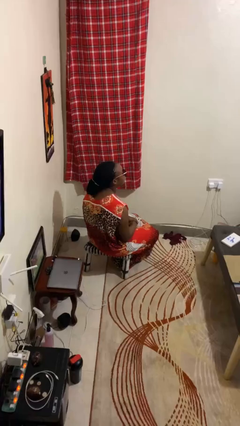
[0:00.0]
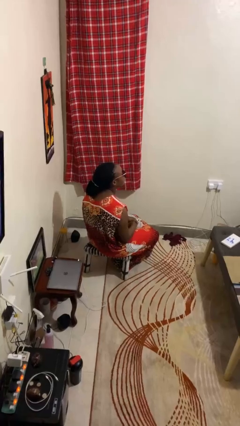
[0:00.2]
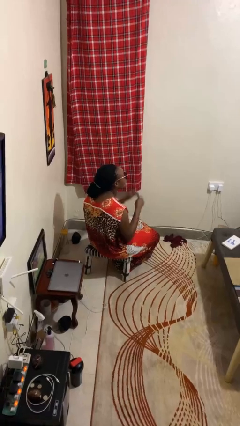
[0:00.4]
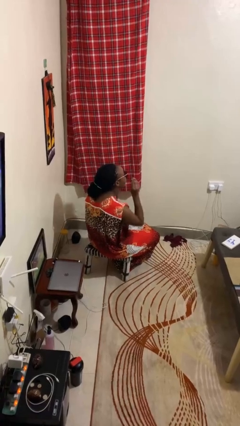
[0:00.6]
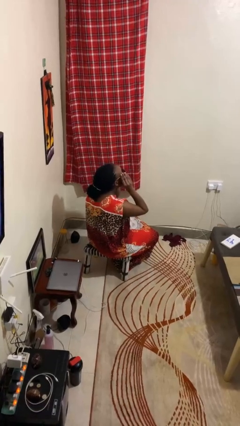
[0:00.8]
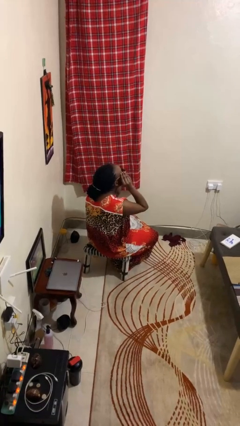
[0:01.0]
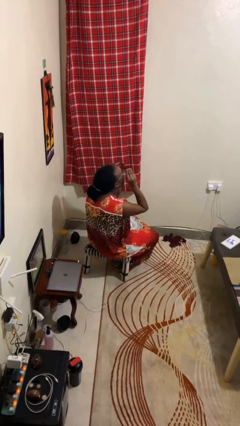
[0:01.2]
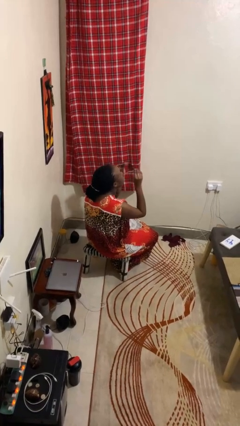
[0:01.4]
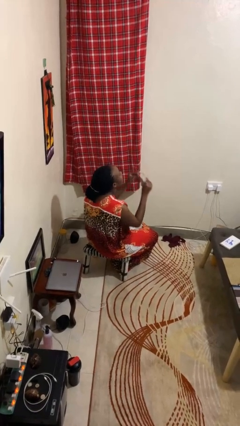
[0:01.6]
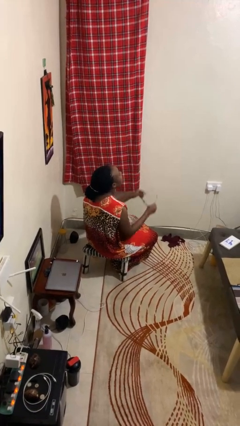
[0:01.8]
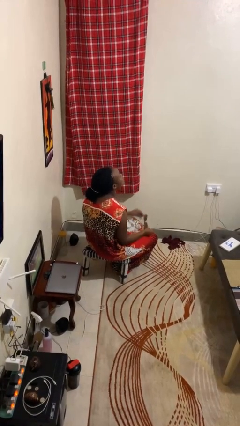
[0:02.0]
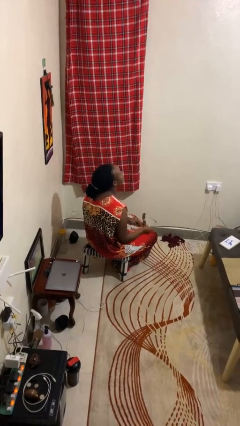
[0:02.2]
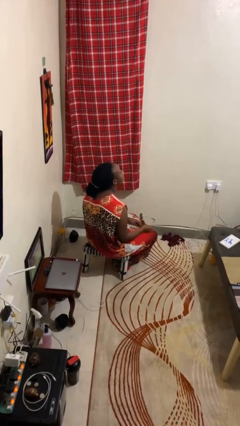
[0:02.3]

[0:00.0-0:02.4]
person takes off sunglasses

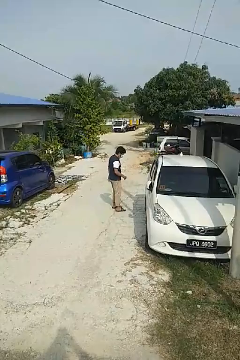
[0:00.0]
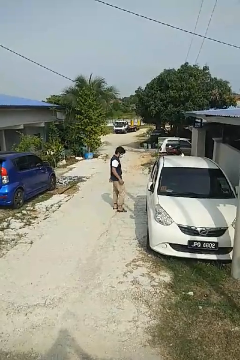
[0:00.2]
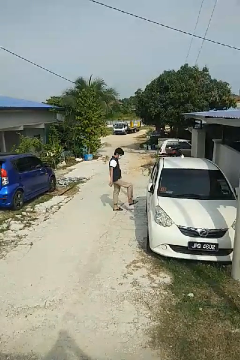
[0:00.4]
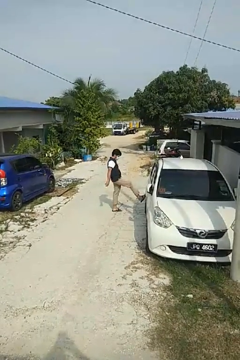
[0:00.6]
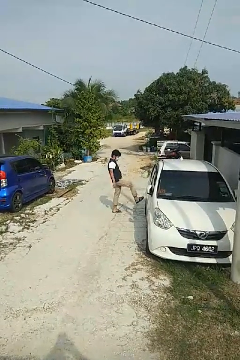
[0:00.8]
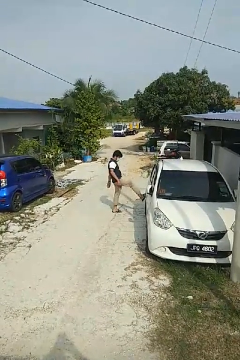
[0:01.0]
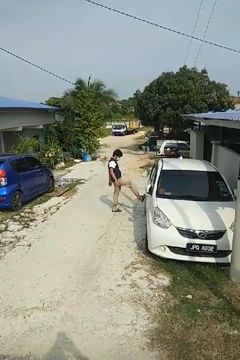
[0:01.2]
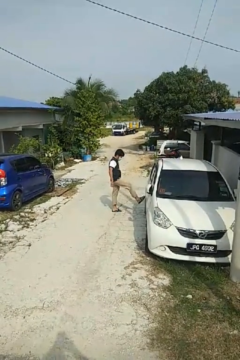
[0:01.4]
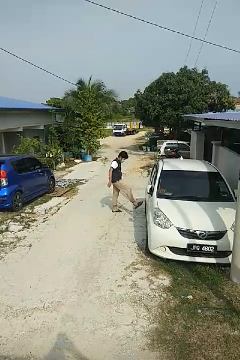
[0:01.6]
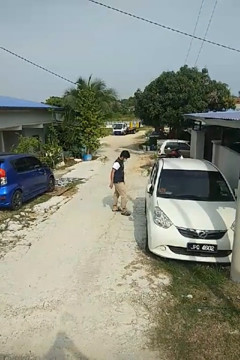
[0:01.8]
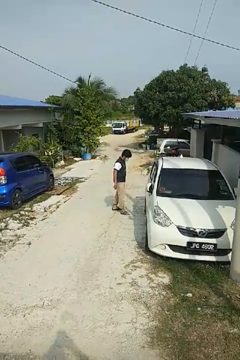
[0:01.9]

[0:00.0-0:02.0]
person kicks car tires

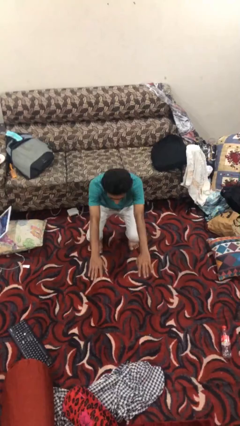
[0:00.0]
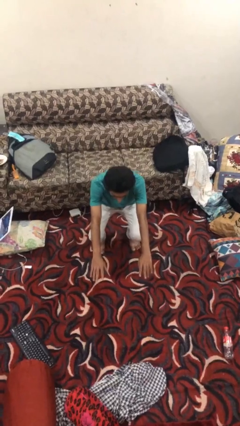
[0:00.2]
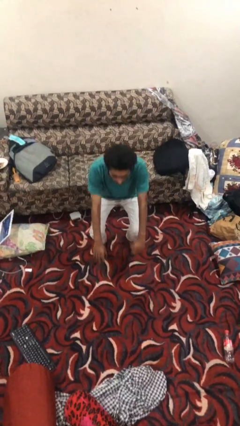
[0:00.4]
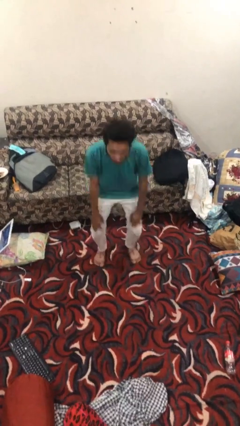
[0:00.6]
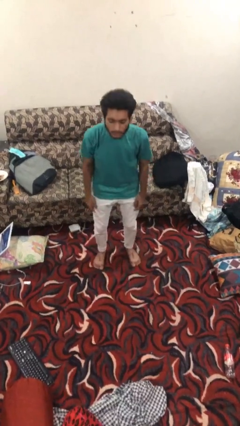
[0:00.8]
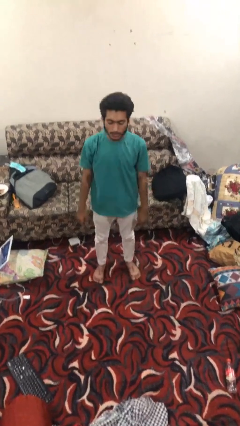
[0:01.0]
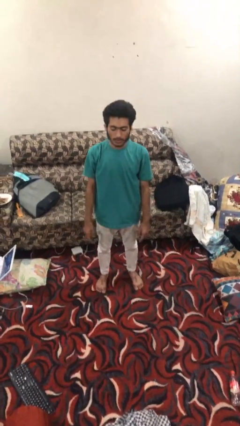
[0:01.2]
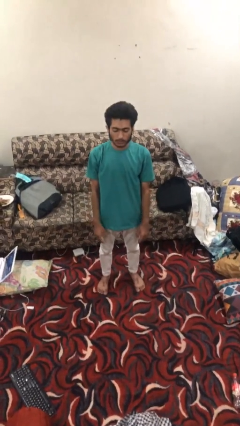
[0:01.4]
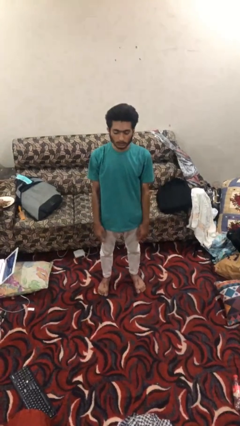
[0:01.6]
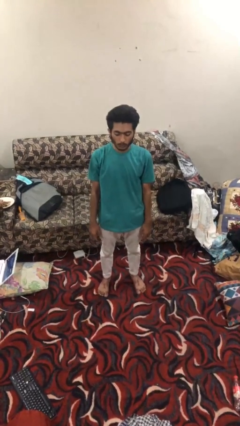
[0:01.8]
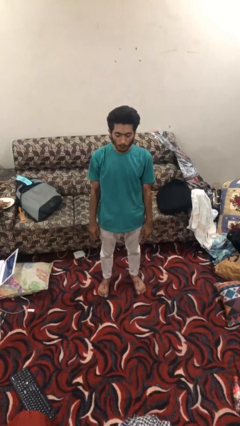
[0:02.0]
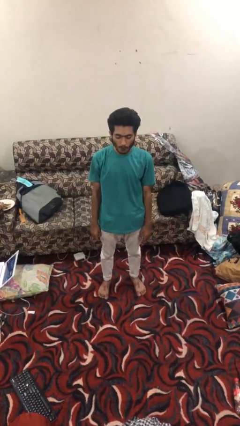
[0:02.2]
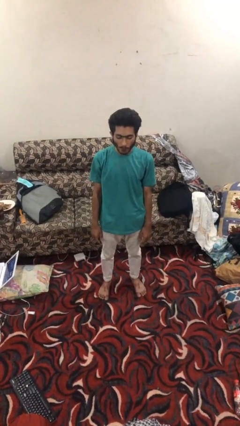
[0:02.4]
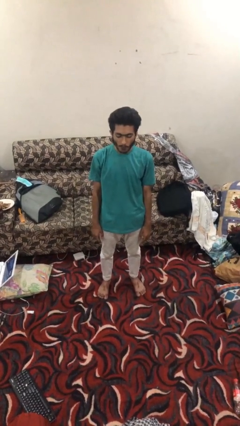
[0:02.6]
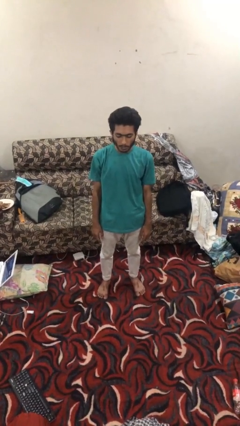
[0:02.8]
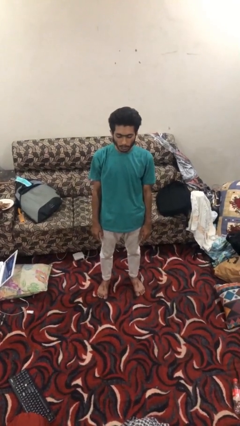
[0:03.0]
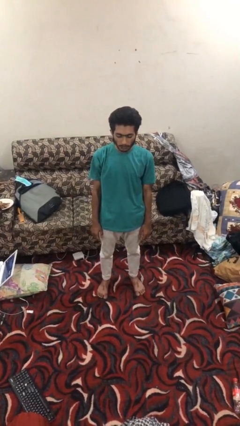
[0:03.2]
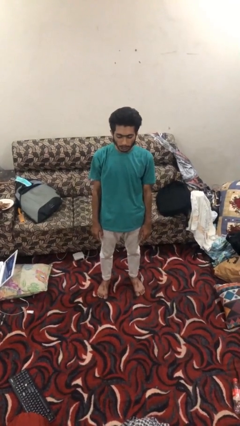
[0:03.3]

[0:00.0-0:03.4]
person stands up

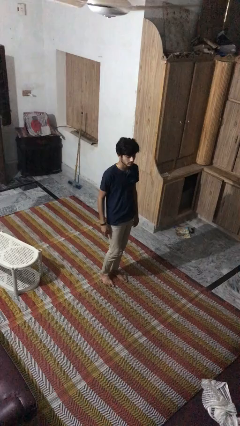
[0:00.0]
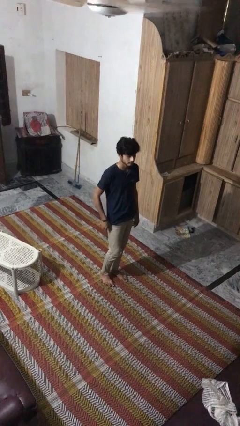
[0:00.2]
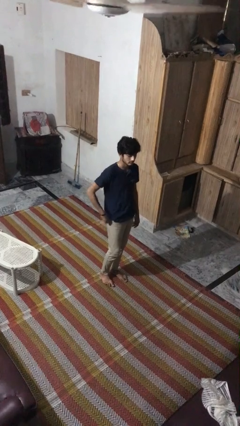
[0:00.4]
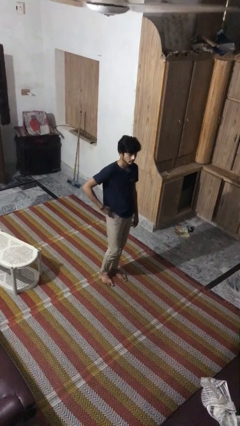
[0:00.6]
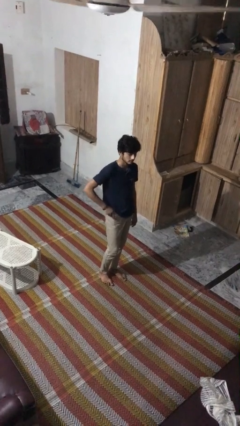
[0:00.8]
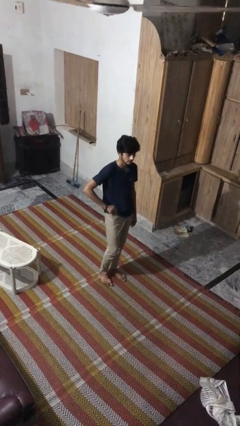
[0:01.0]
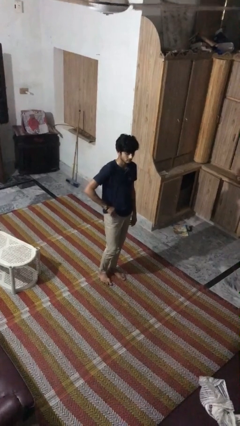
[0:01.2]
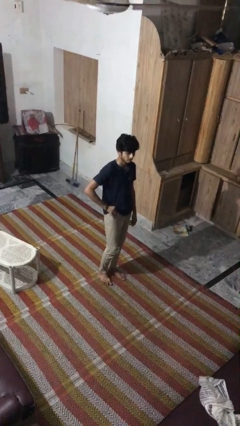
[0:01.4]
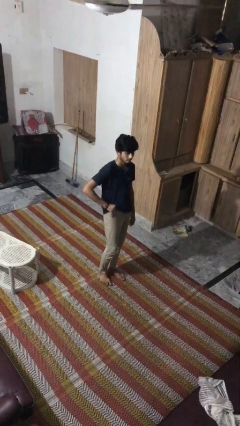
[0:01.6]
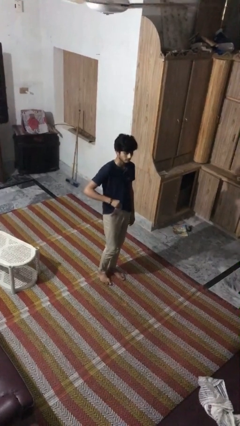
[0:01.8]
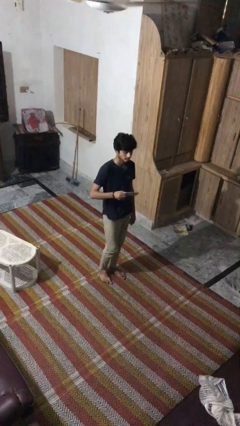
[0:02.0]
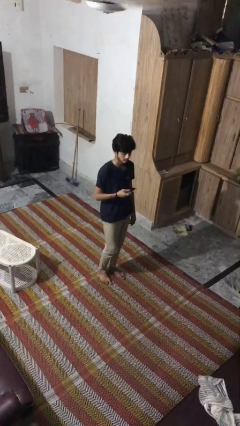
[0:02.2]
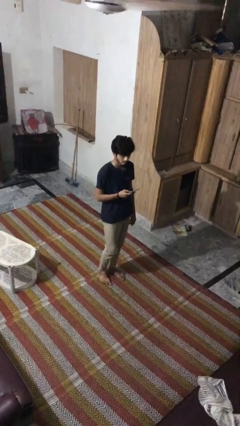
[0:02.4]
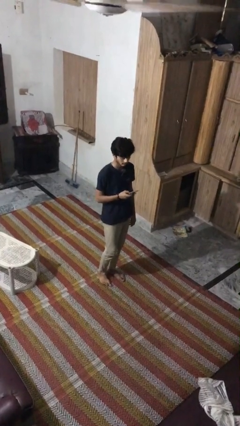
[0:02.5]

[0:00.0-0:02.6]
person takes phone from pocket

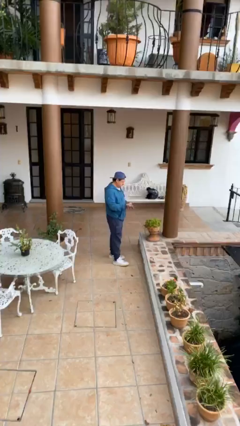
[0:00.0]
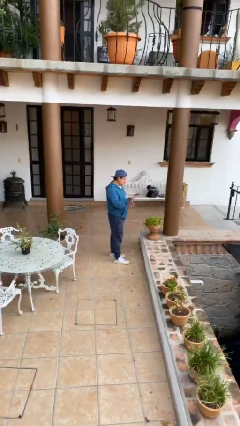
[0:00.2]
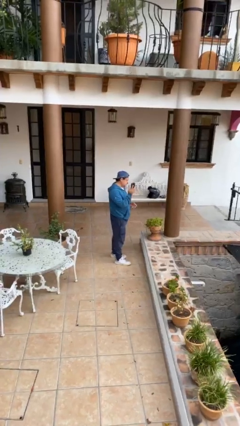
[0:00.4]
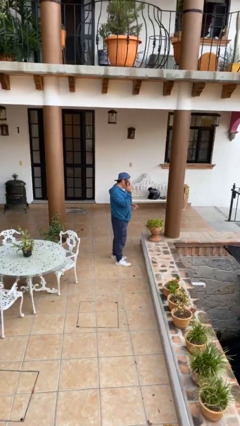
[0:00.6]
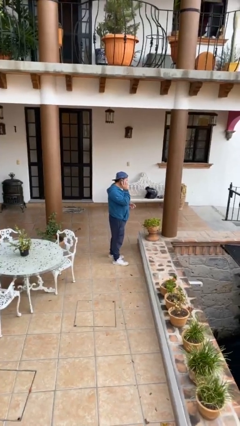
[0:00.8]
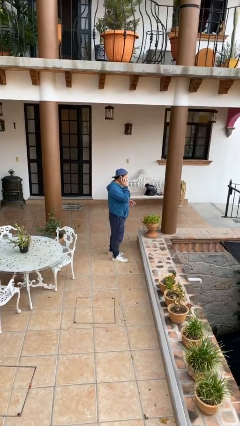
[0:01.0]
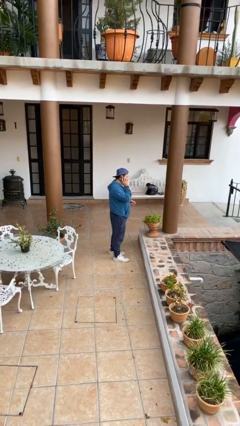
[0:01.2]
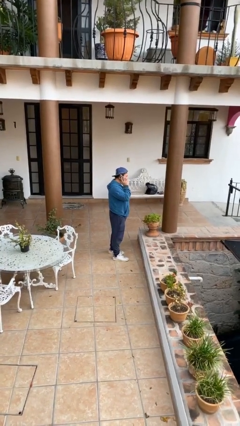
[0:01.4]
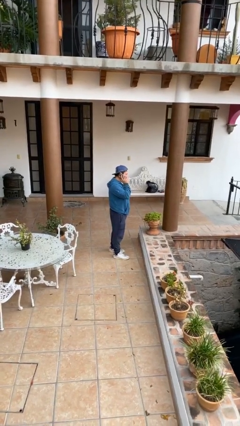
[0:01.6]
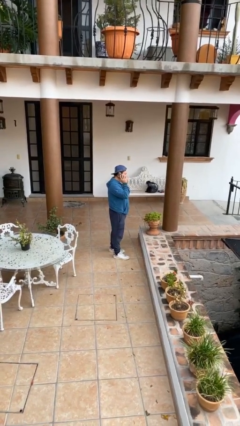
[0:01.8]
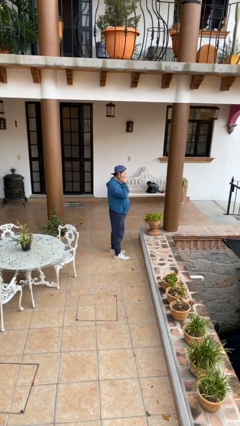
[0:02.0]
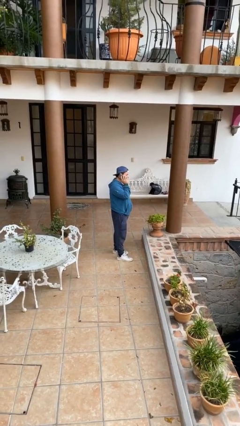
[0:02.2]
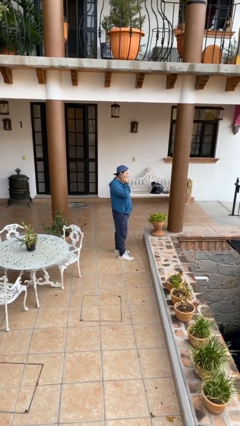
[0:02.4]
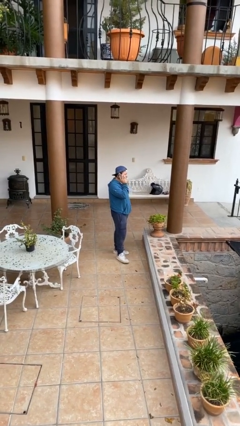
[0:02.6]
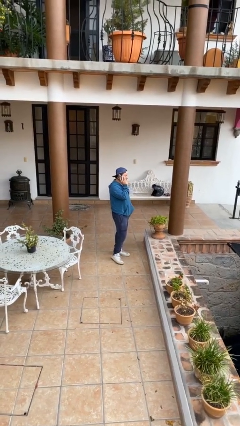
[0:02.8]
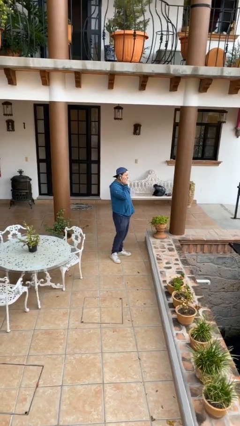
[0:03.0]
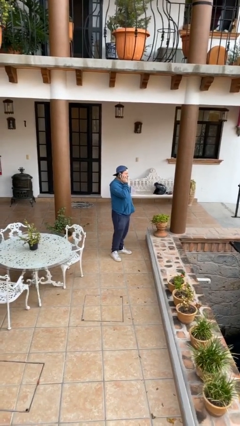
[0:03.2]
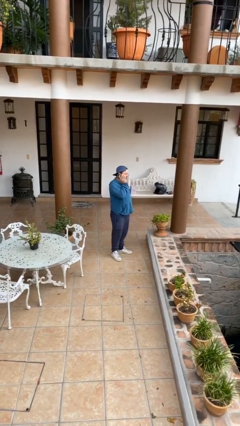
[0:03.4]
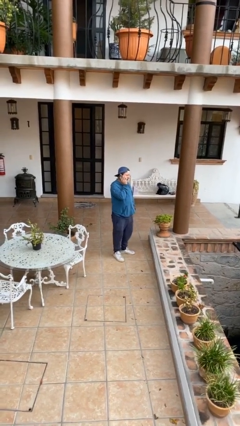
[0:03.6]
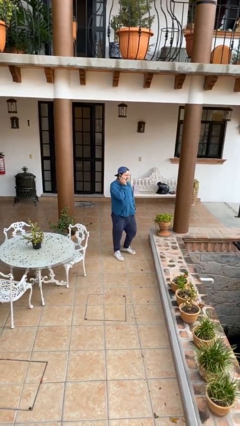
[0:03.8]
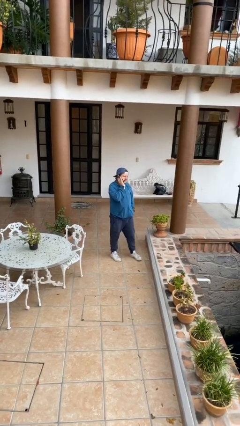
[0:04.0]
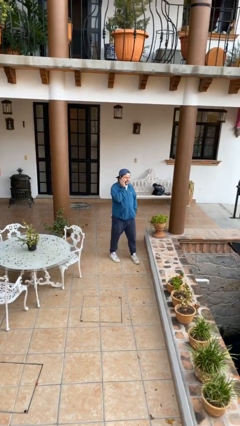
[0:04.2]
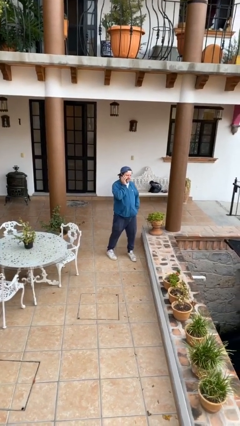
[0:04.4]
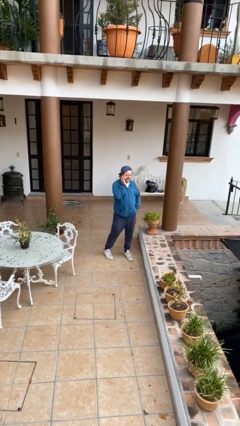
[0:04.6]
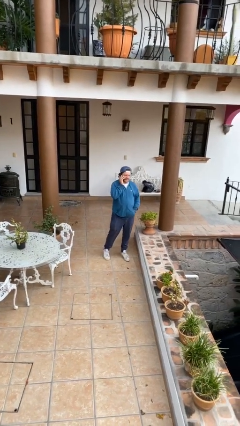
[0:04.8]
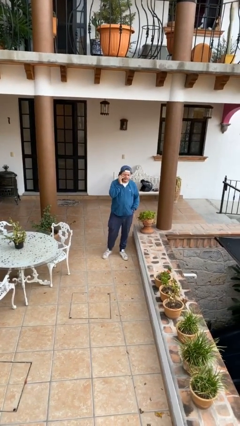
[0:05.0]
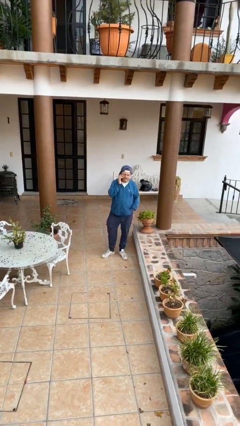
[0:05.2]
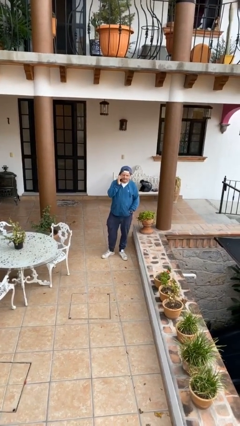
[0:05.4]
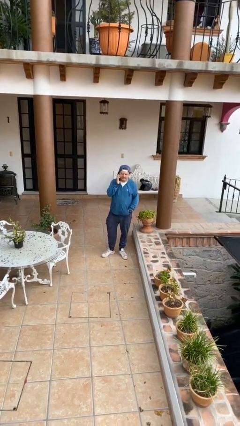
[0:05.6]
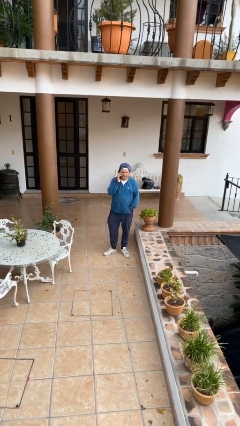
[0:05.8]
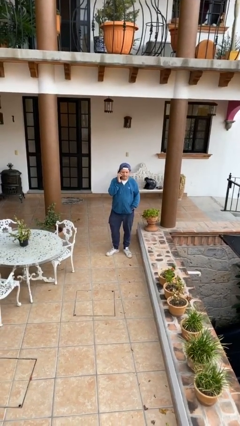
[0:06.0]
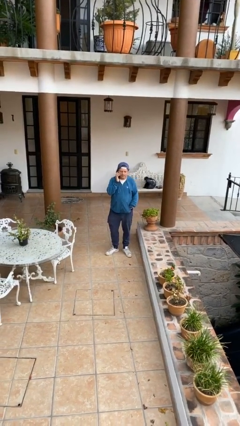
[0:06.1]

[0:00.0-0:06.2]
person talks on phone

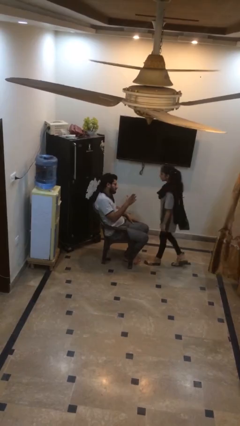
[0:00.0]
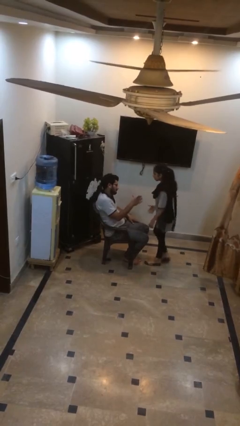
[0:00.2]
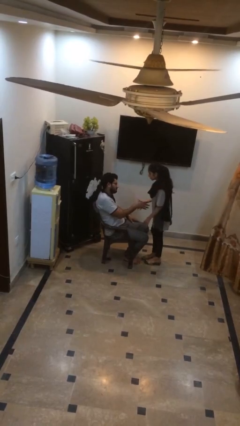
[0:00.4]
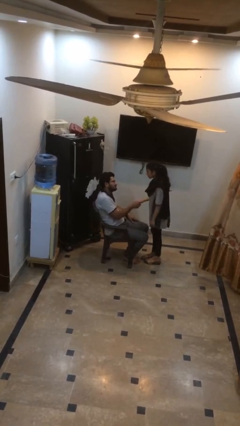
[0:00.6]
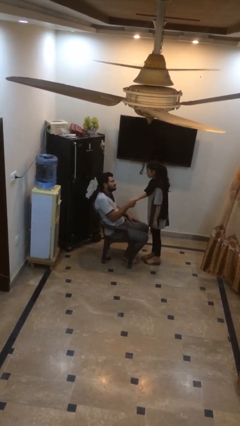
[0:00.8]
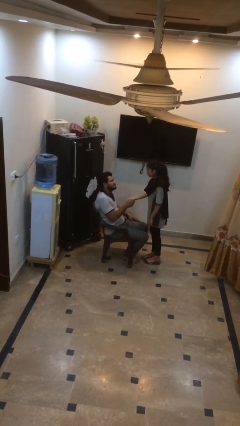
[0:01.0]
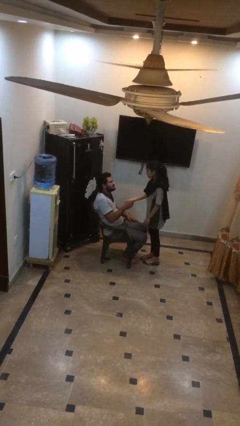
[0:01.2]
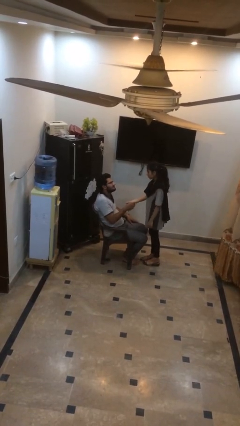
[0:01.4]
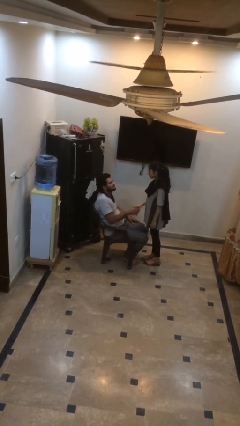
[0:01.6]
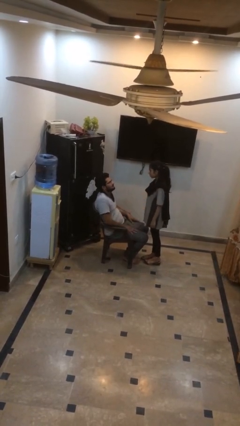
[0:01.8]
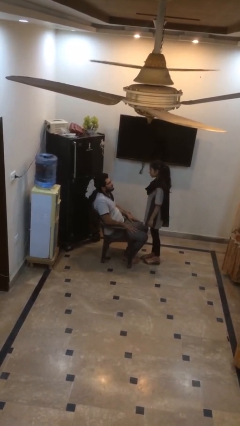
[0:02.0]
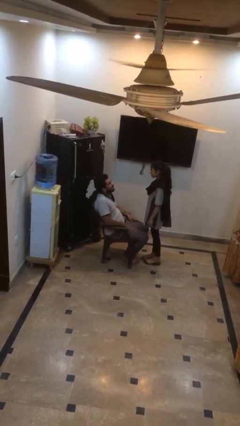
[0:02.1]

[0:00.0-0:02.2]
person shakes hand
